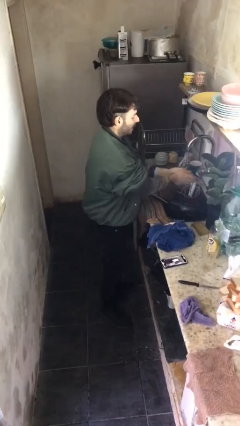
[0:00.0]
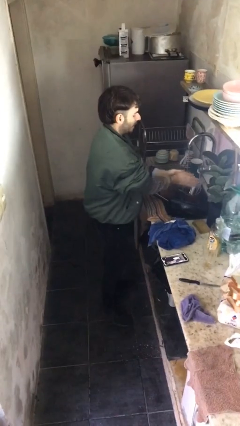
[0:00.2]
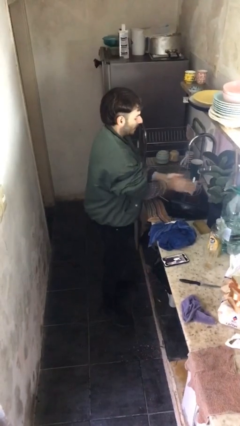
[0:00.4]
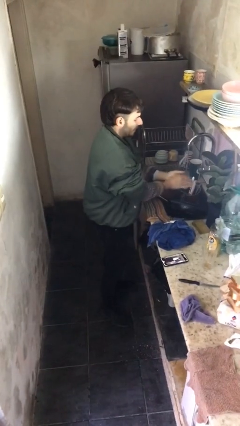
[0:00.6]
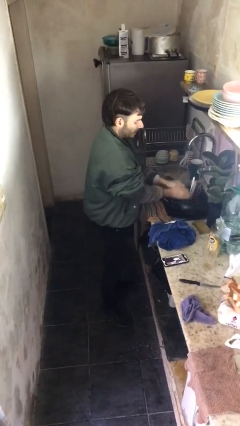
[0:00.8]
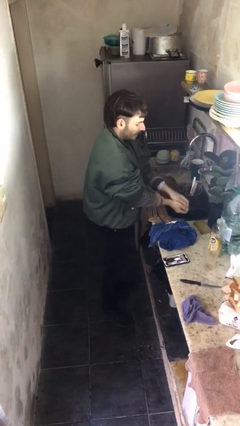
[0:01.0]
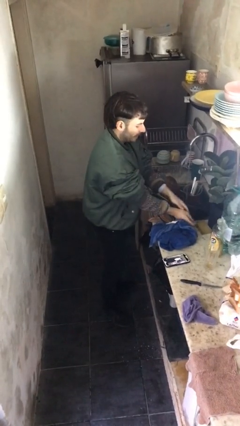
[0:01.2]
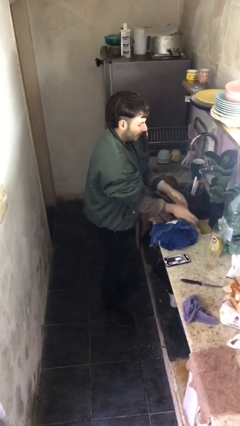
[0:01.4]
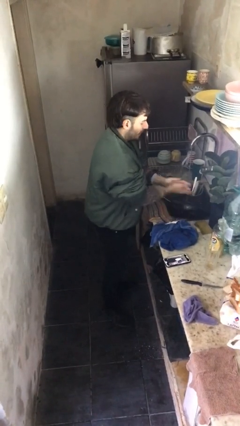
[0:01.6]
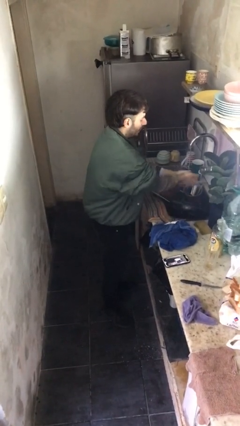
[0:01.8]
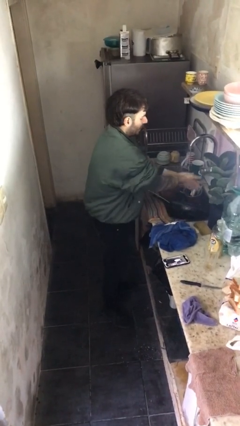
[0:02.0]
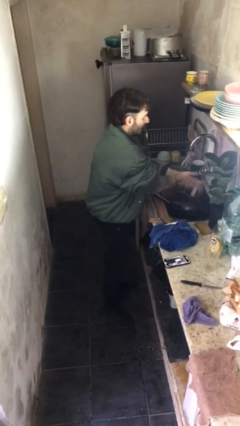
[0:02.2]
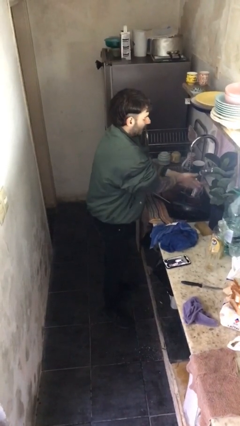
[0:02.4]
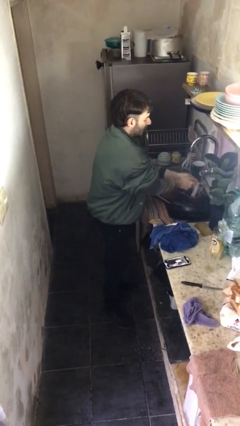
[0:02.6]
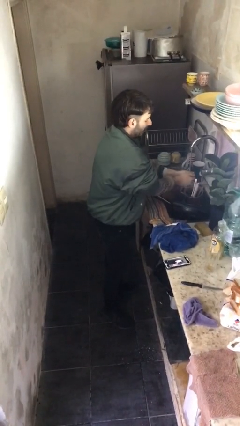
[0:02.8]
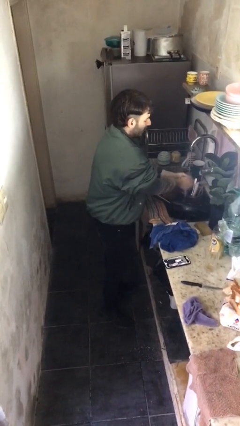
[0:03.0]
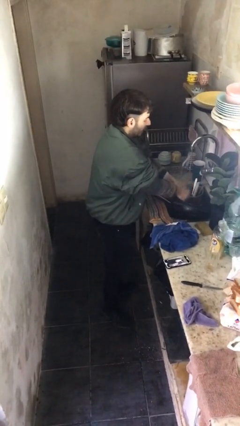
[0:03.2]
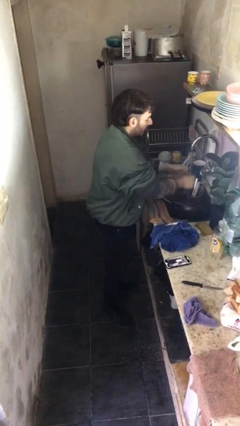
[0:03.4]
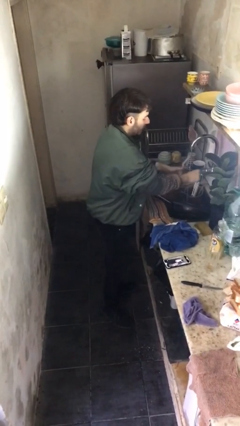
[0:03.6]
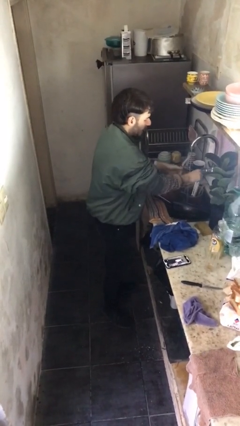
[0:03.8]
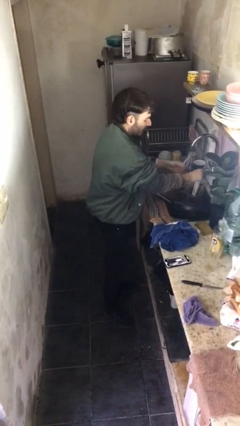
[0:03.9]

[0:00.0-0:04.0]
person washes hands

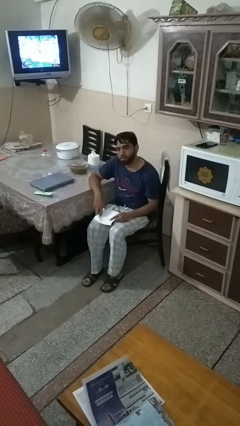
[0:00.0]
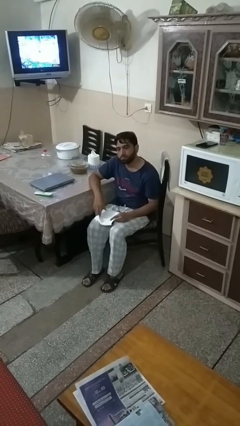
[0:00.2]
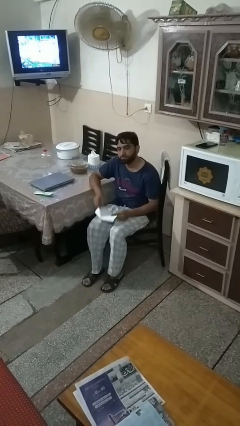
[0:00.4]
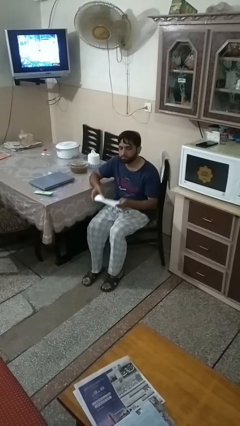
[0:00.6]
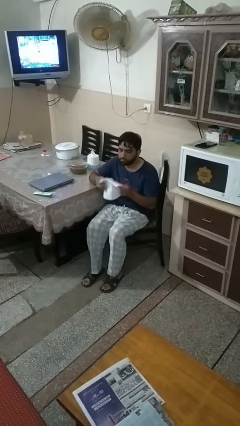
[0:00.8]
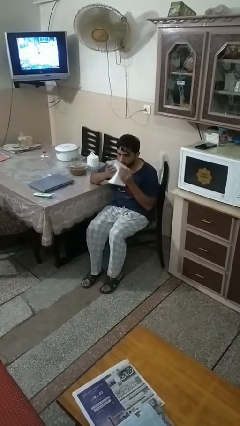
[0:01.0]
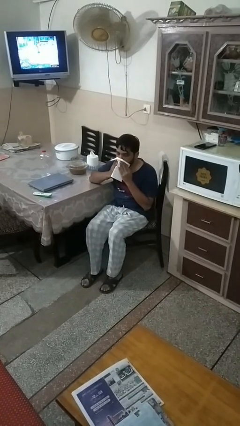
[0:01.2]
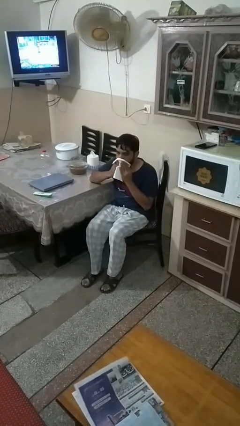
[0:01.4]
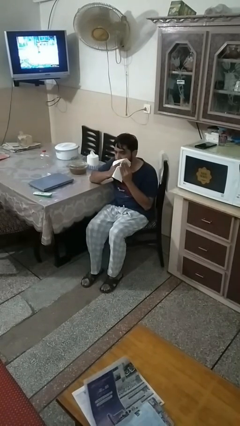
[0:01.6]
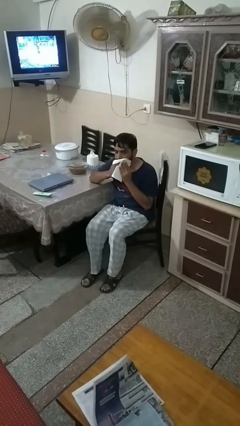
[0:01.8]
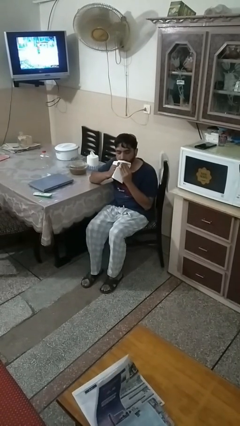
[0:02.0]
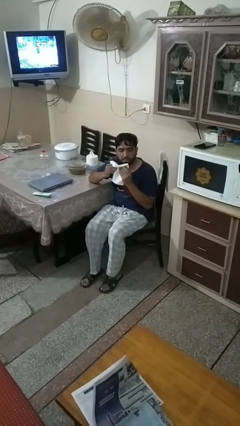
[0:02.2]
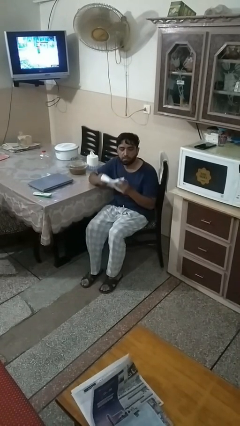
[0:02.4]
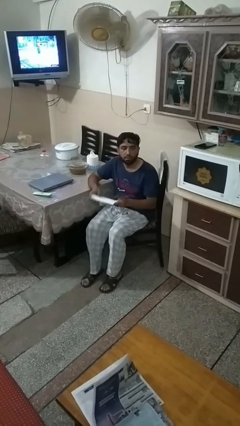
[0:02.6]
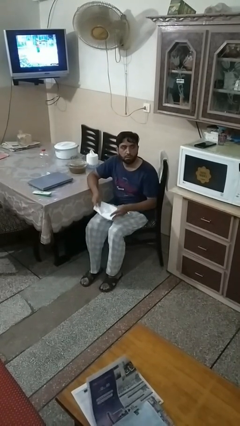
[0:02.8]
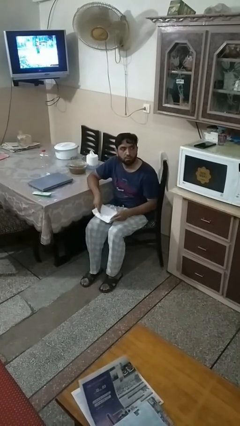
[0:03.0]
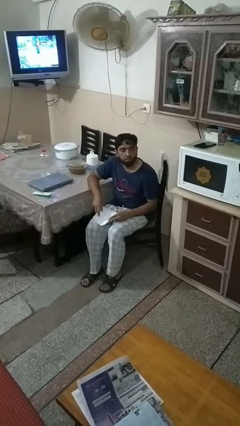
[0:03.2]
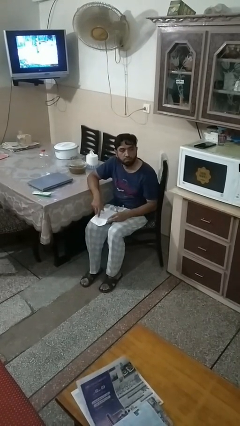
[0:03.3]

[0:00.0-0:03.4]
person wipes mouth with napkin

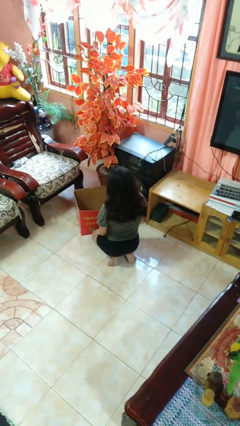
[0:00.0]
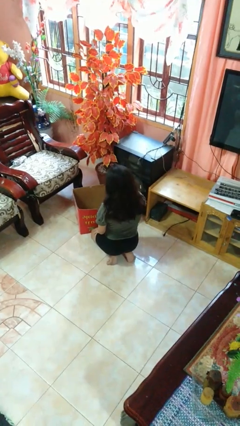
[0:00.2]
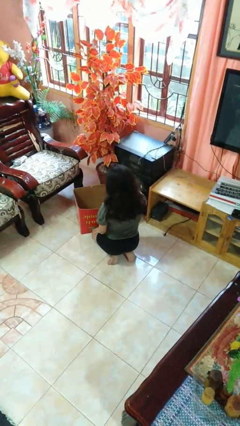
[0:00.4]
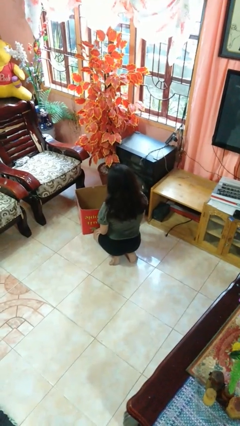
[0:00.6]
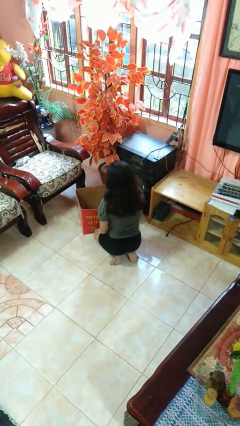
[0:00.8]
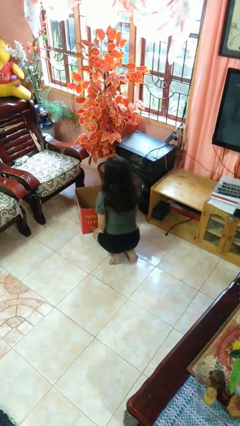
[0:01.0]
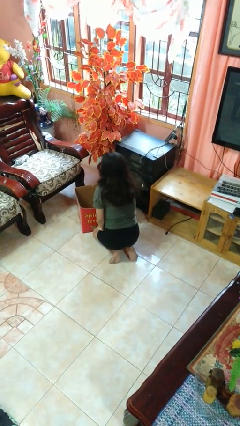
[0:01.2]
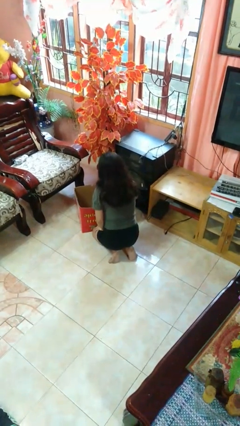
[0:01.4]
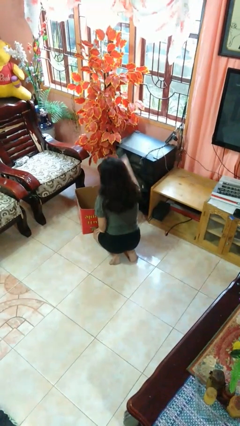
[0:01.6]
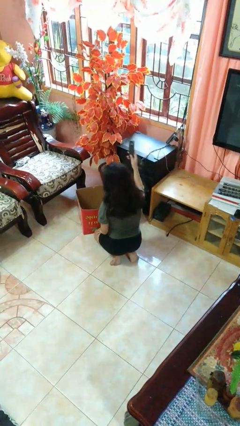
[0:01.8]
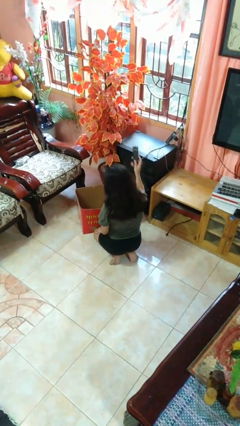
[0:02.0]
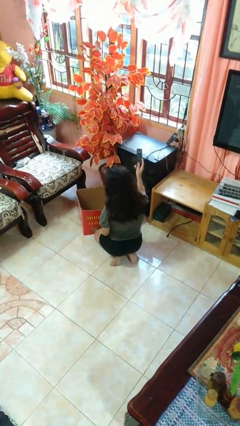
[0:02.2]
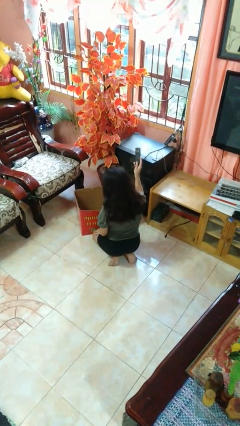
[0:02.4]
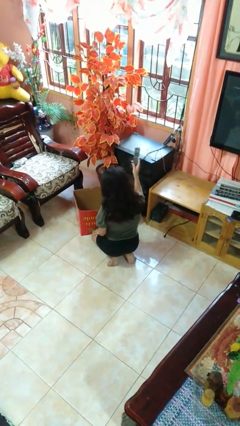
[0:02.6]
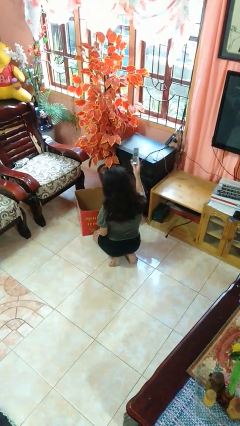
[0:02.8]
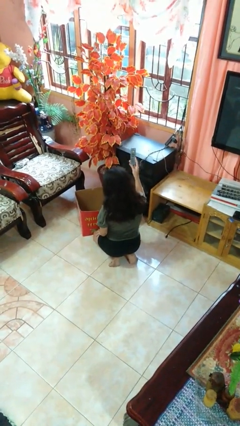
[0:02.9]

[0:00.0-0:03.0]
person takes object from box

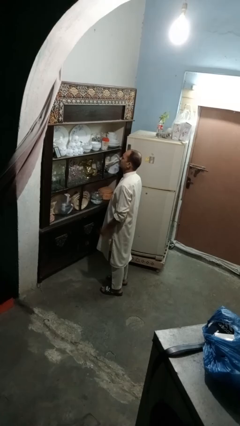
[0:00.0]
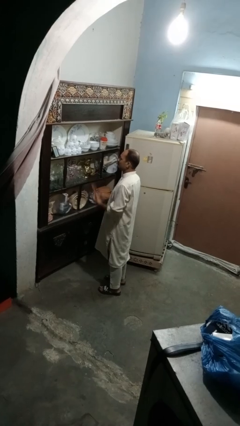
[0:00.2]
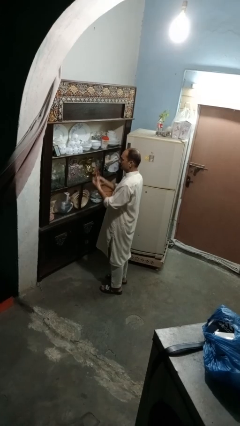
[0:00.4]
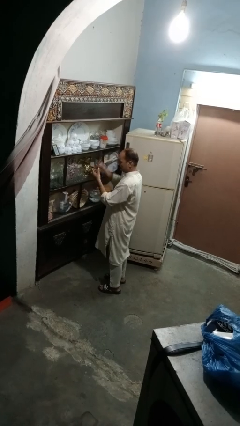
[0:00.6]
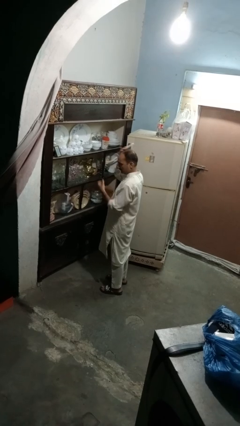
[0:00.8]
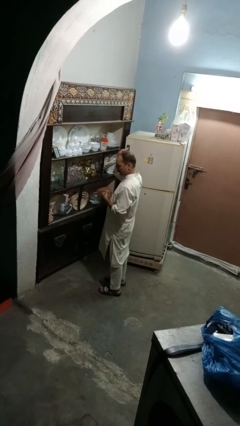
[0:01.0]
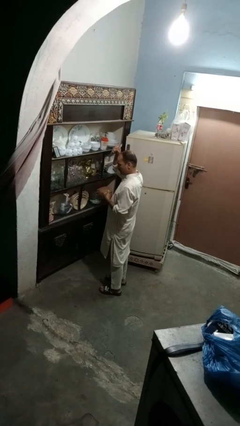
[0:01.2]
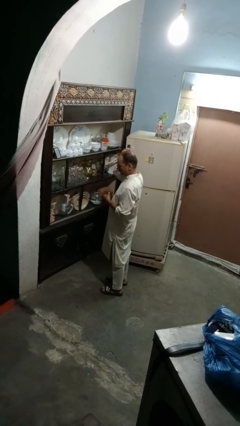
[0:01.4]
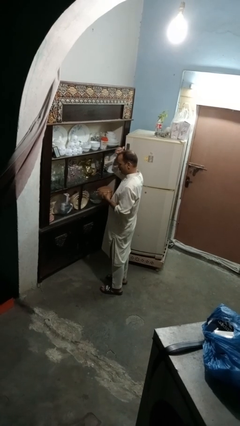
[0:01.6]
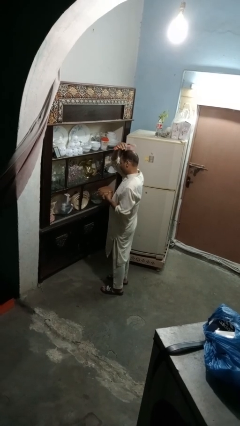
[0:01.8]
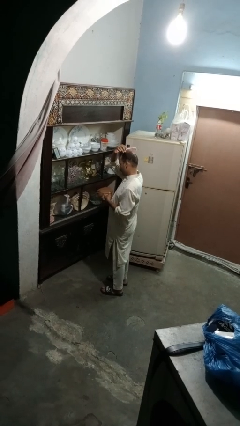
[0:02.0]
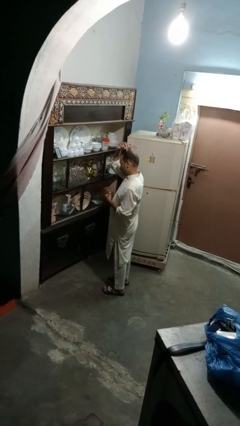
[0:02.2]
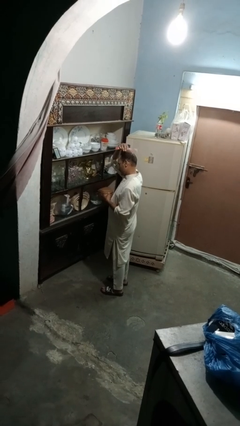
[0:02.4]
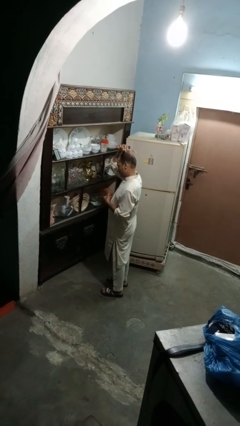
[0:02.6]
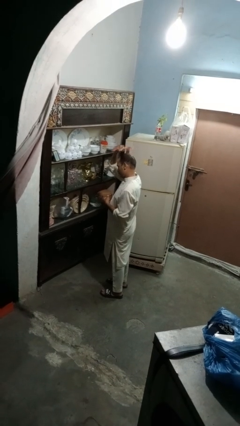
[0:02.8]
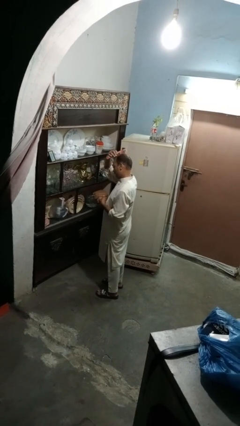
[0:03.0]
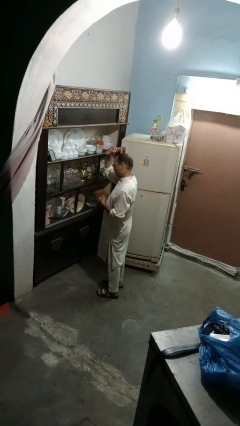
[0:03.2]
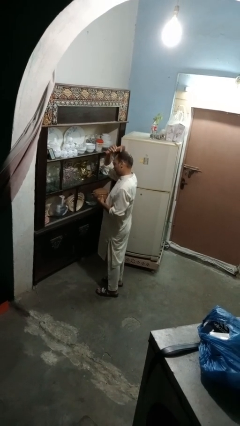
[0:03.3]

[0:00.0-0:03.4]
person brushes hair

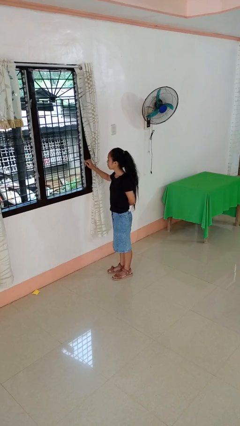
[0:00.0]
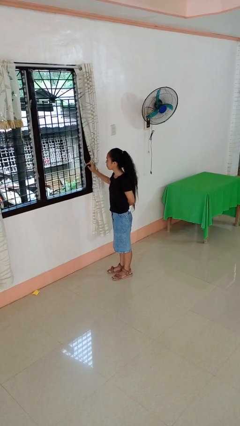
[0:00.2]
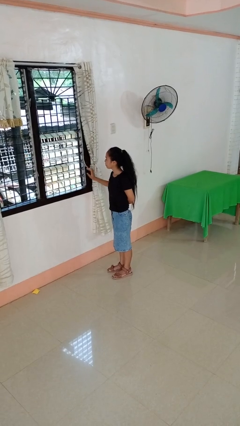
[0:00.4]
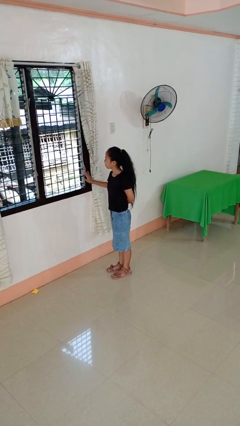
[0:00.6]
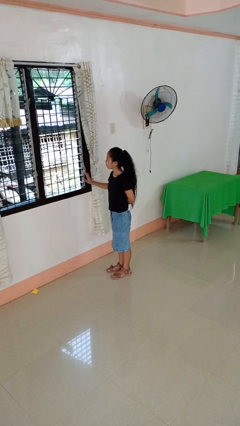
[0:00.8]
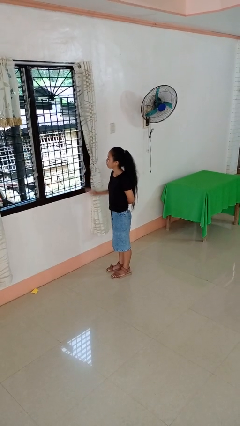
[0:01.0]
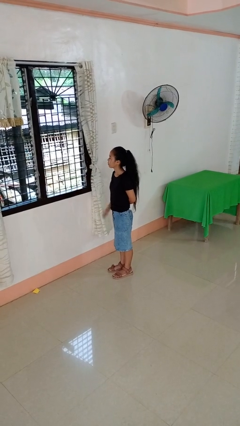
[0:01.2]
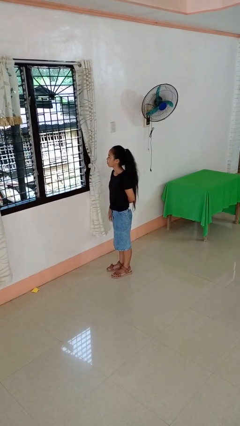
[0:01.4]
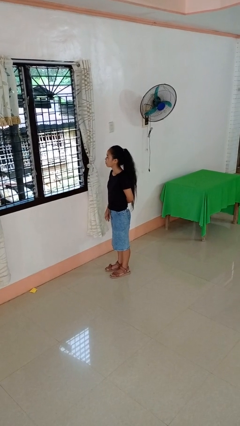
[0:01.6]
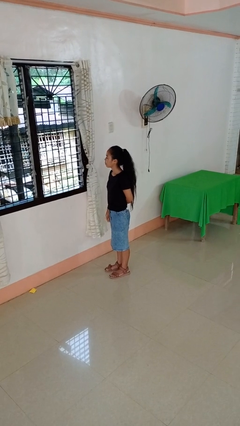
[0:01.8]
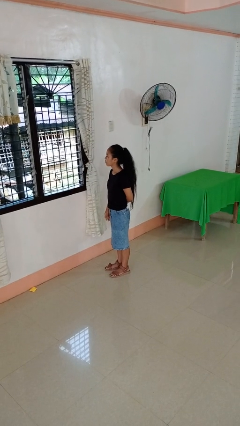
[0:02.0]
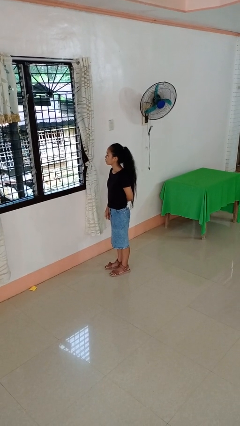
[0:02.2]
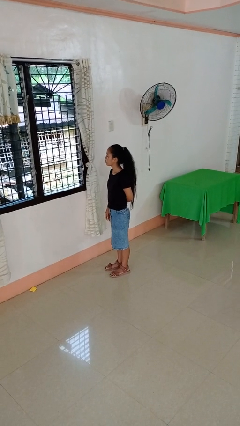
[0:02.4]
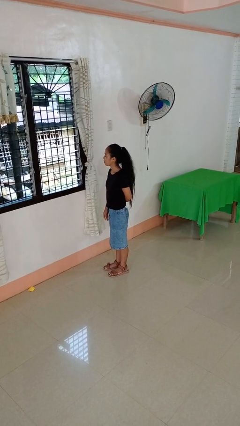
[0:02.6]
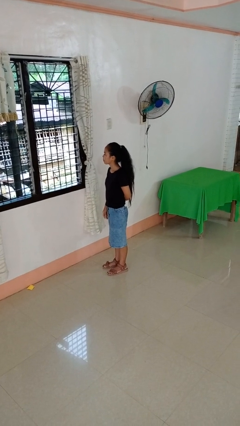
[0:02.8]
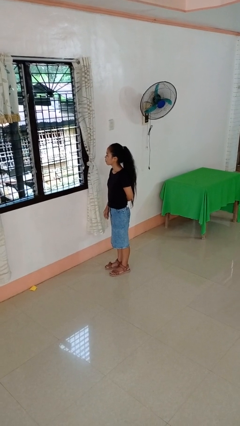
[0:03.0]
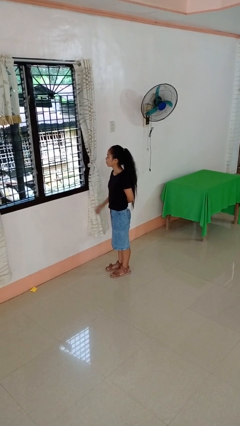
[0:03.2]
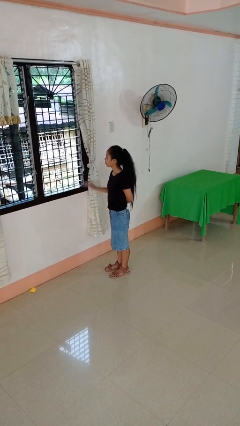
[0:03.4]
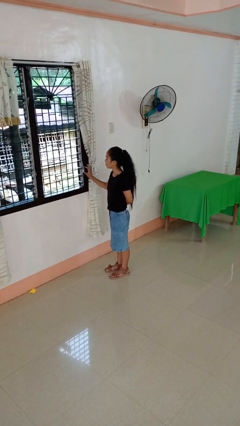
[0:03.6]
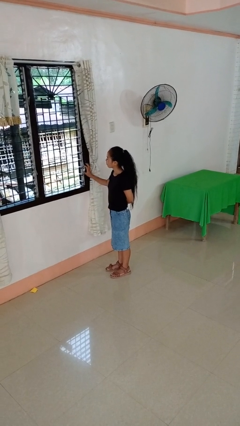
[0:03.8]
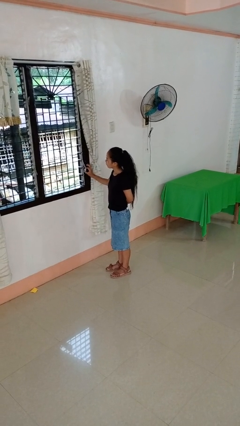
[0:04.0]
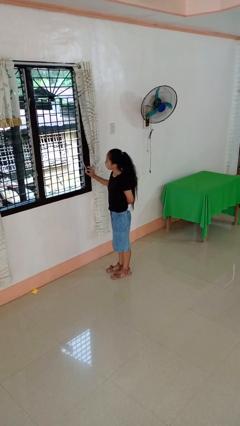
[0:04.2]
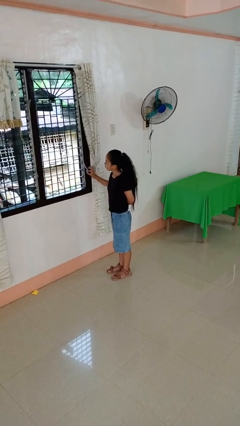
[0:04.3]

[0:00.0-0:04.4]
person opens home window
